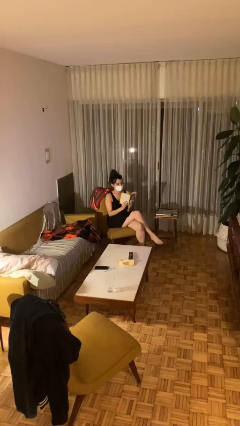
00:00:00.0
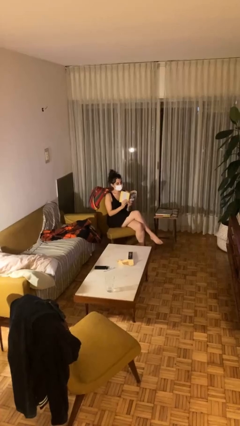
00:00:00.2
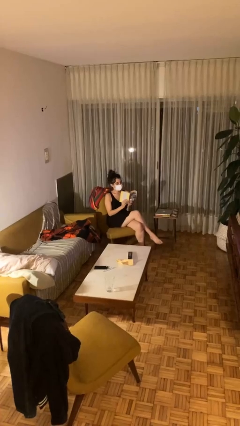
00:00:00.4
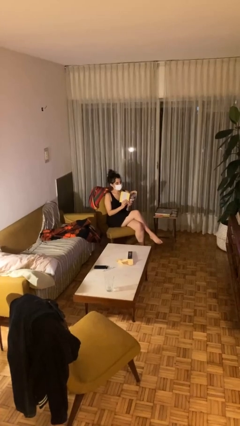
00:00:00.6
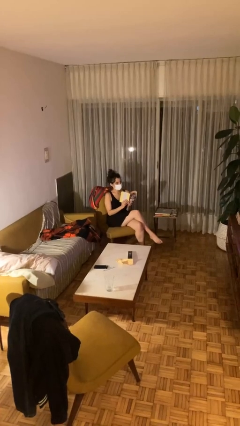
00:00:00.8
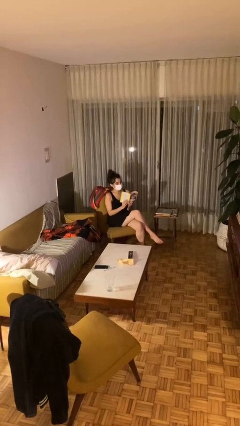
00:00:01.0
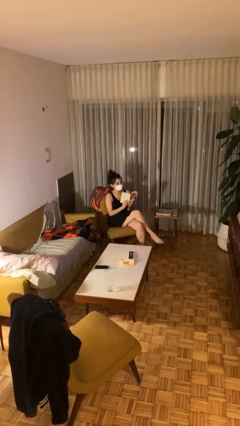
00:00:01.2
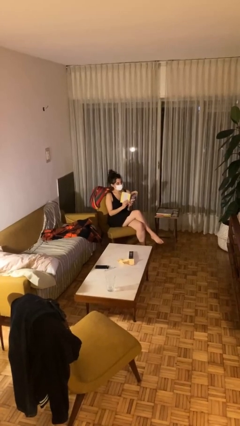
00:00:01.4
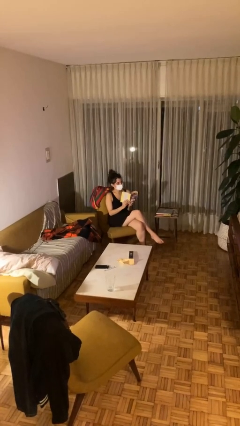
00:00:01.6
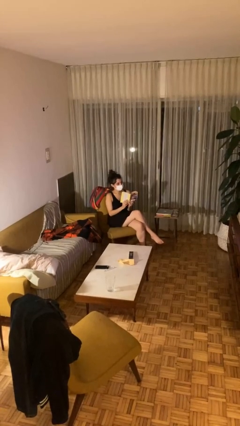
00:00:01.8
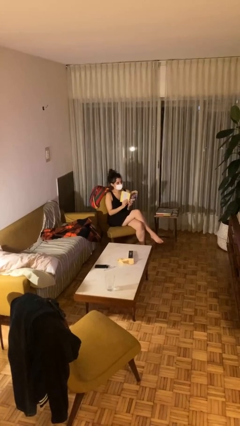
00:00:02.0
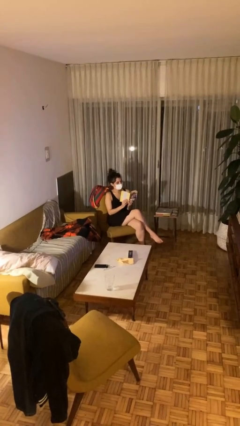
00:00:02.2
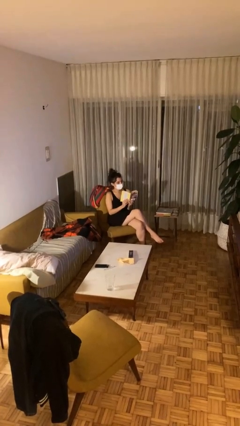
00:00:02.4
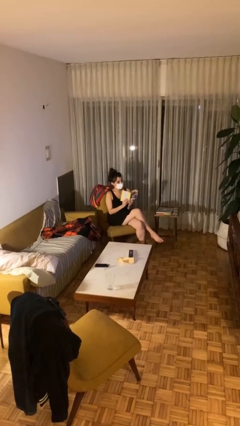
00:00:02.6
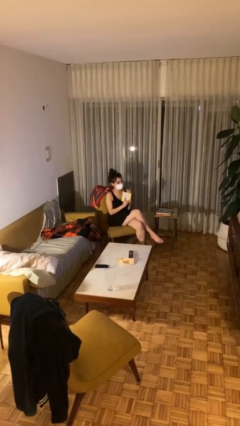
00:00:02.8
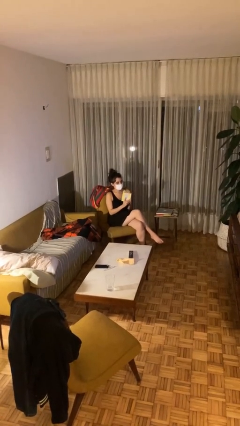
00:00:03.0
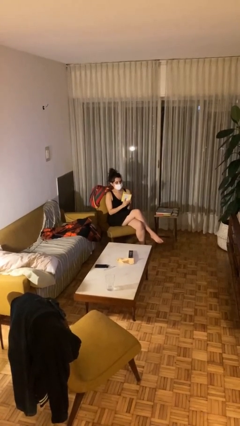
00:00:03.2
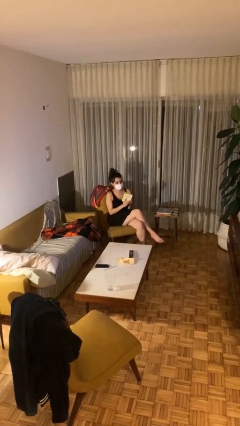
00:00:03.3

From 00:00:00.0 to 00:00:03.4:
person reads document

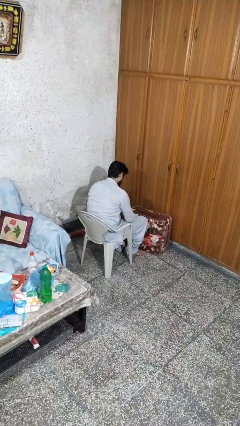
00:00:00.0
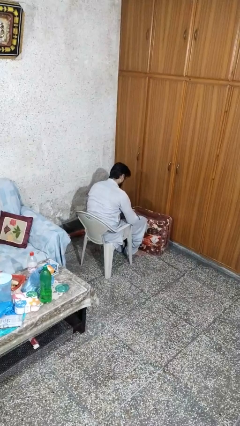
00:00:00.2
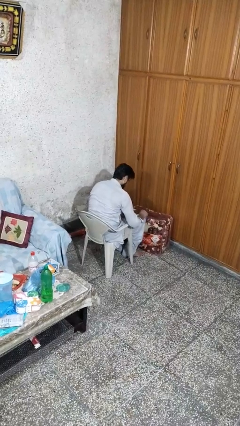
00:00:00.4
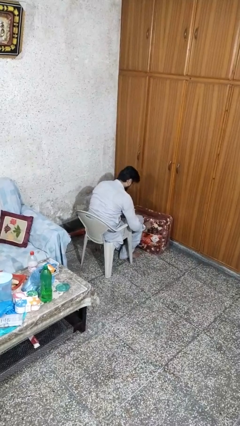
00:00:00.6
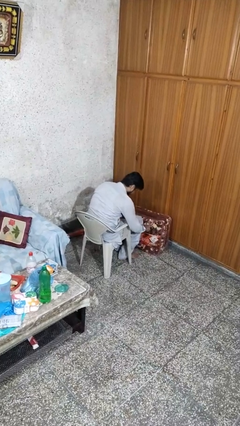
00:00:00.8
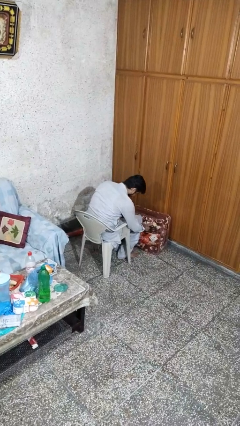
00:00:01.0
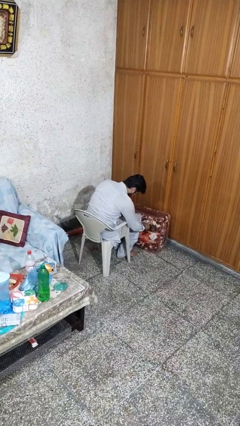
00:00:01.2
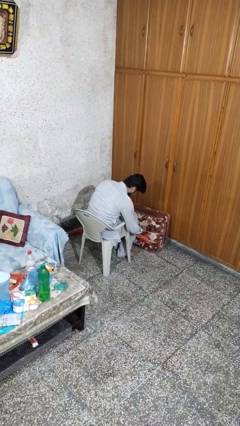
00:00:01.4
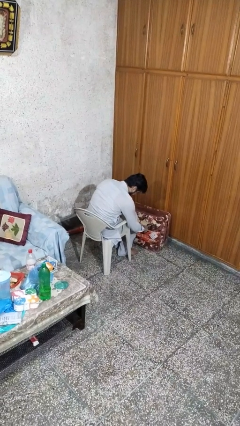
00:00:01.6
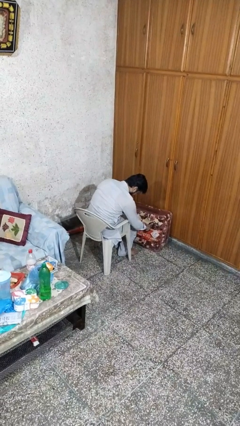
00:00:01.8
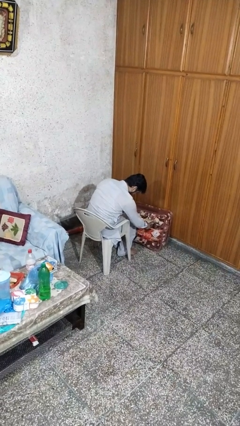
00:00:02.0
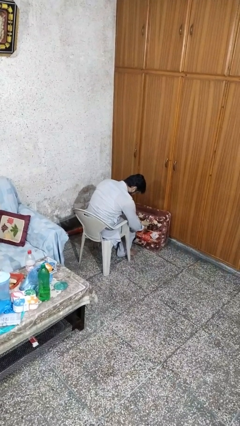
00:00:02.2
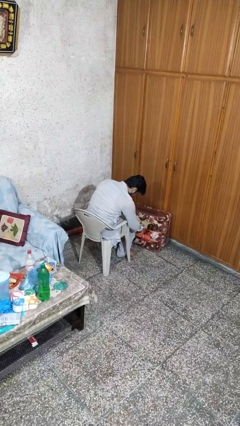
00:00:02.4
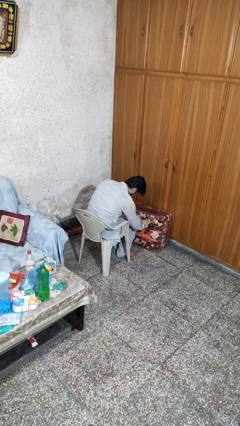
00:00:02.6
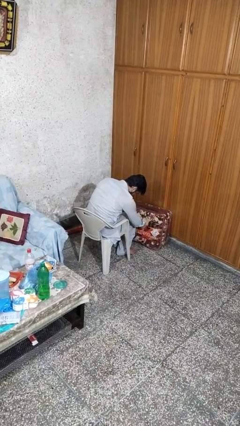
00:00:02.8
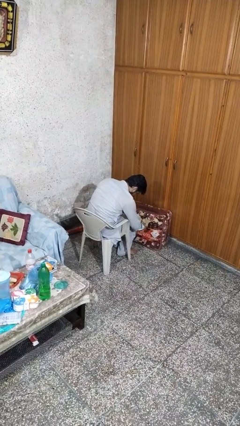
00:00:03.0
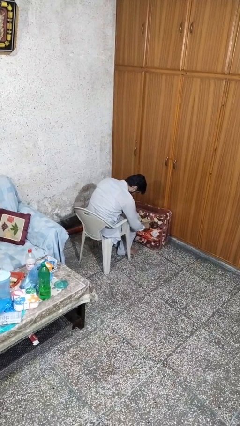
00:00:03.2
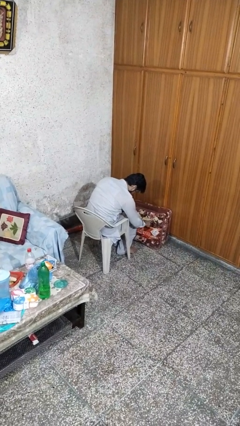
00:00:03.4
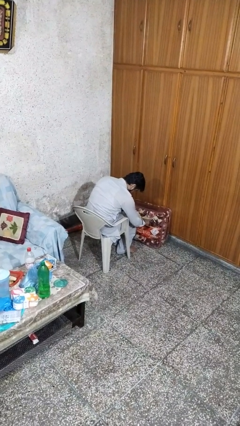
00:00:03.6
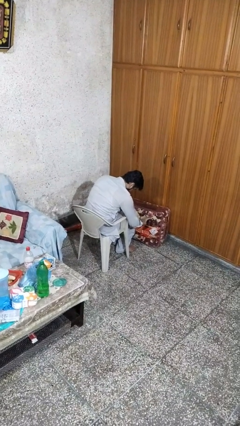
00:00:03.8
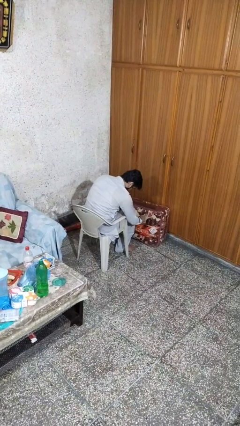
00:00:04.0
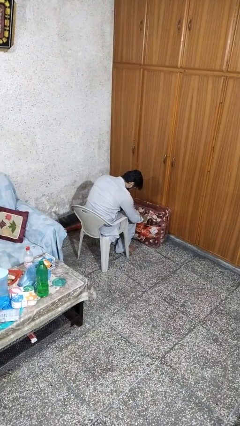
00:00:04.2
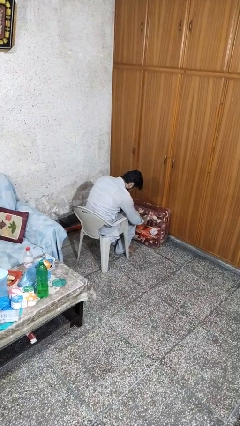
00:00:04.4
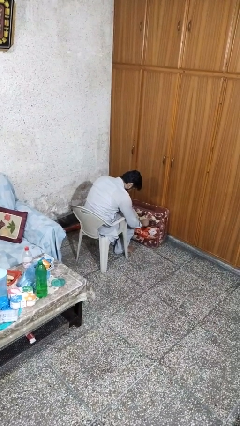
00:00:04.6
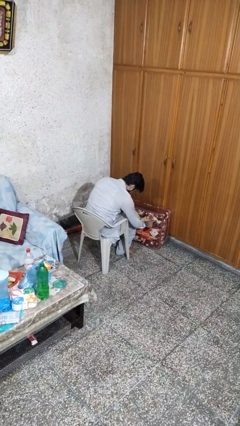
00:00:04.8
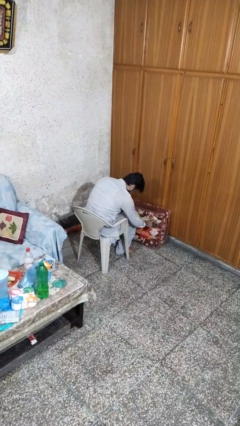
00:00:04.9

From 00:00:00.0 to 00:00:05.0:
person taps object with finger

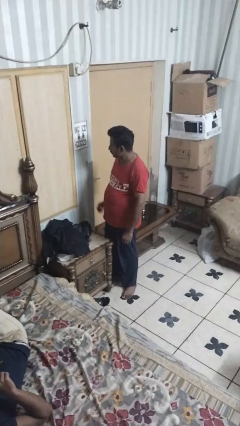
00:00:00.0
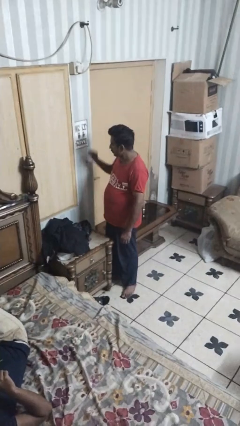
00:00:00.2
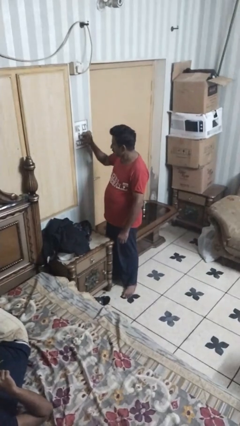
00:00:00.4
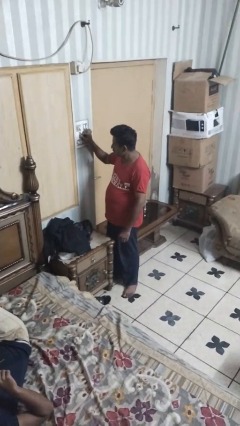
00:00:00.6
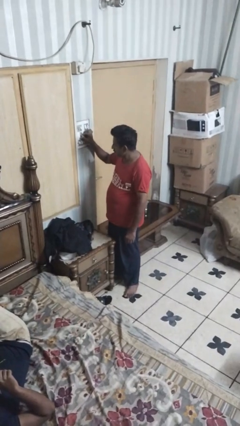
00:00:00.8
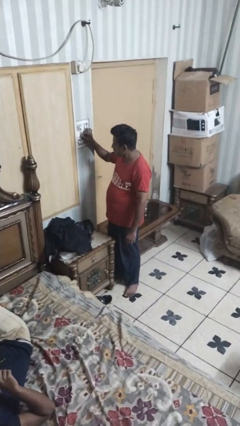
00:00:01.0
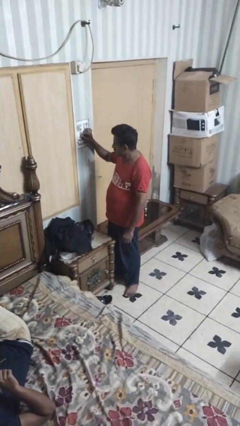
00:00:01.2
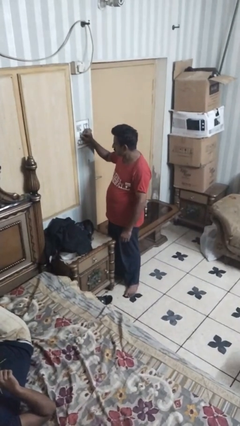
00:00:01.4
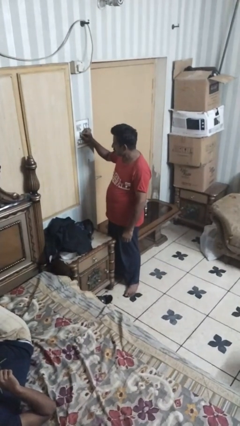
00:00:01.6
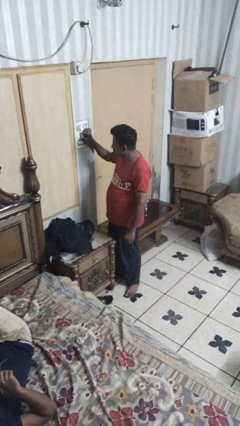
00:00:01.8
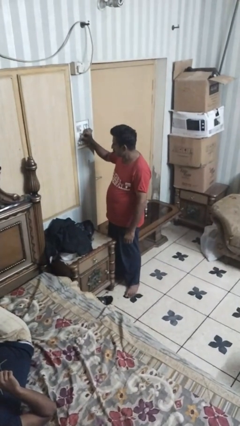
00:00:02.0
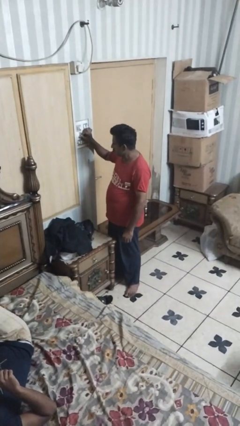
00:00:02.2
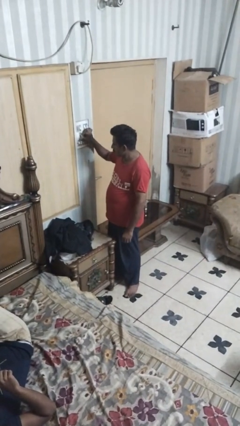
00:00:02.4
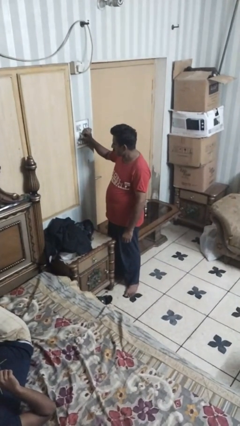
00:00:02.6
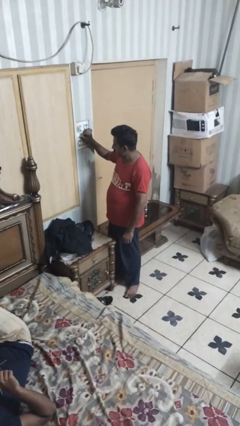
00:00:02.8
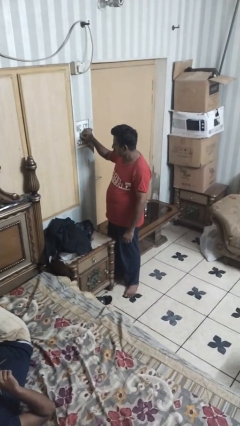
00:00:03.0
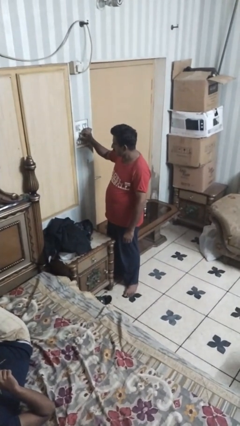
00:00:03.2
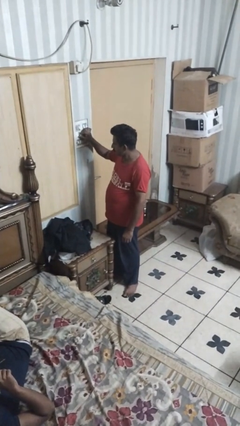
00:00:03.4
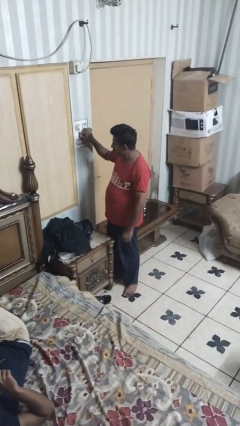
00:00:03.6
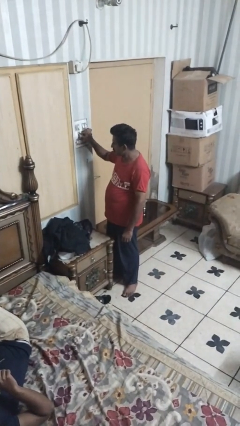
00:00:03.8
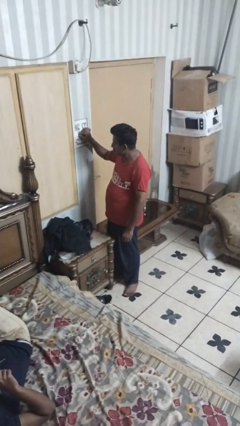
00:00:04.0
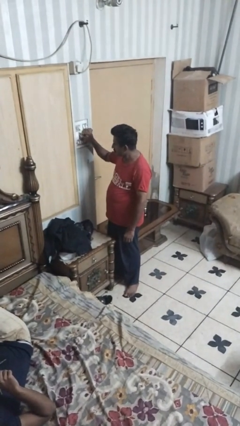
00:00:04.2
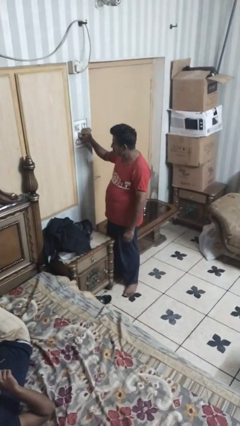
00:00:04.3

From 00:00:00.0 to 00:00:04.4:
person adjusts thermostat

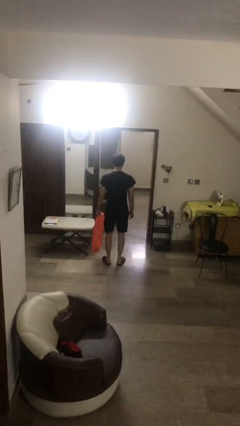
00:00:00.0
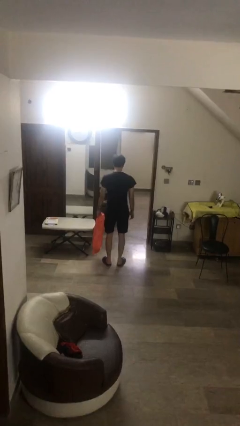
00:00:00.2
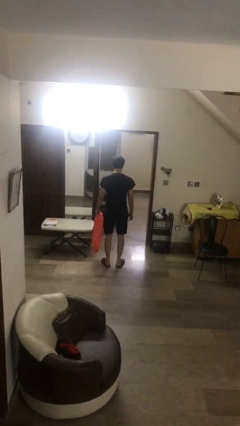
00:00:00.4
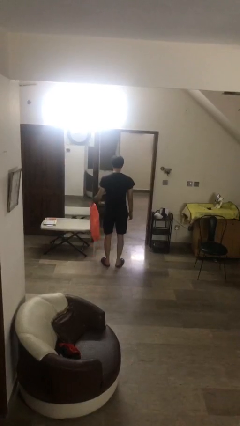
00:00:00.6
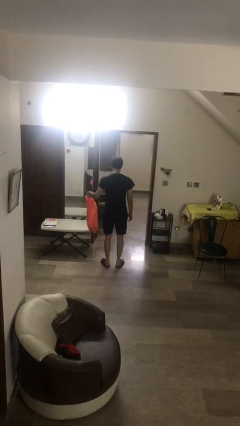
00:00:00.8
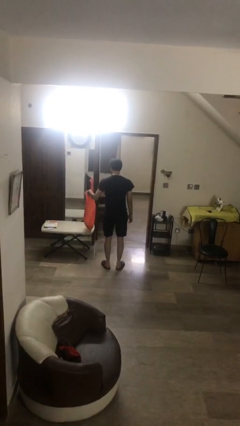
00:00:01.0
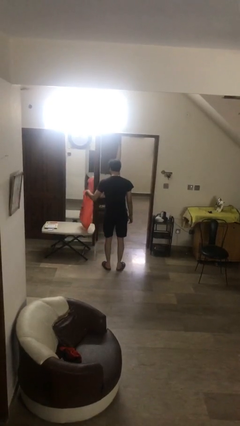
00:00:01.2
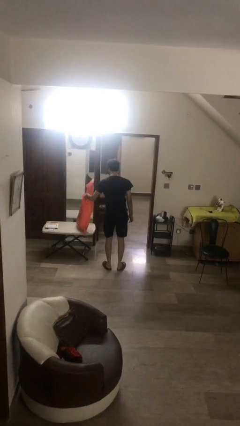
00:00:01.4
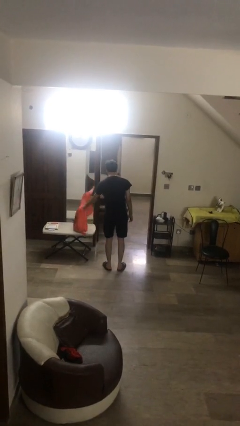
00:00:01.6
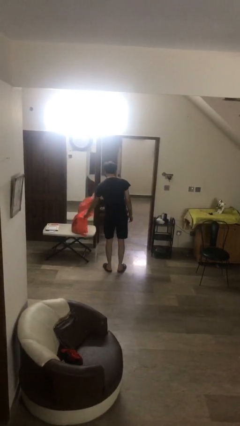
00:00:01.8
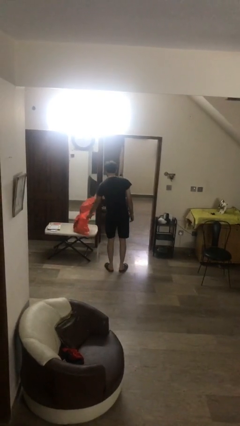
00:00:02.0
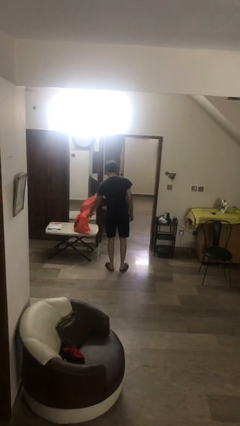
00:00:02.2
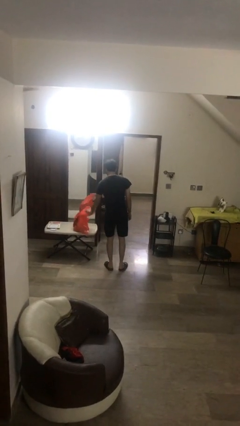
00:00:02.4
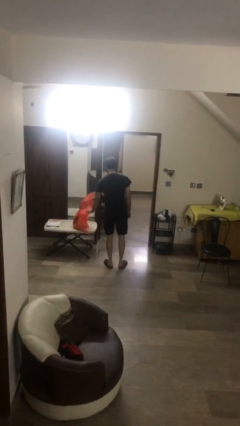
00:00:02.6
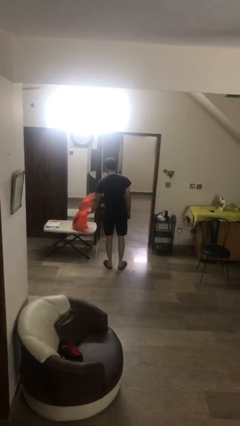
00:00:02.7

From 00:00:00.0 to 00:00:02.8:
person puts down object on table

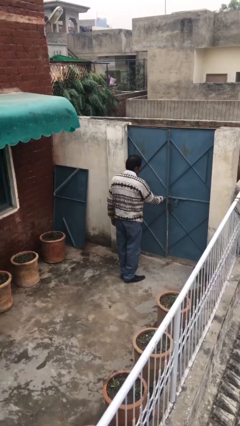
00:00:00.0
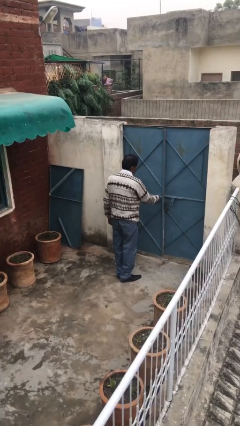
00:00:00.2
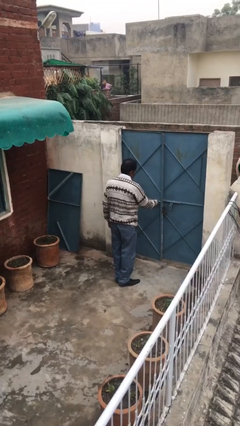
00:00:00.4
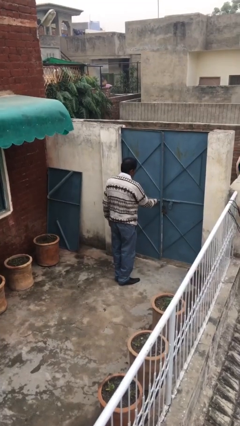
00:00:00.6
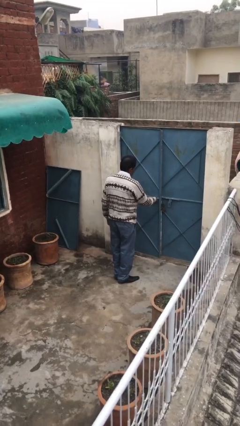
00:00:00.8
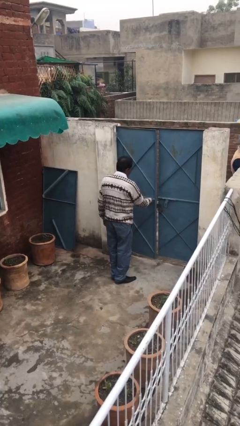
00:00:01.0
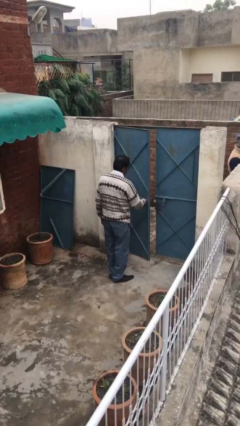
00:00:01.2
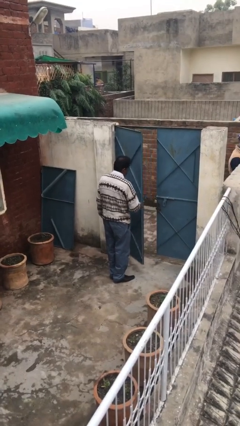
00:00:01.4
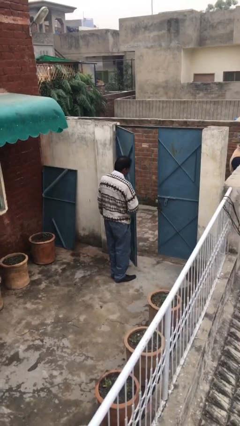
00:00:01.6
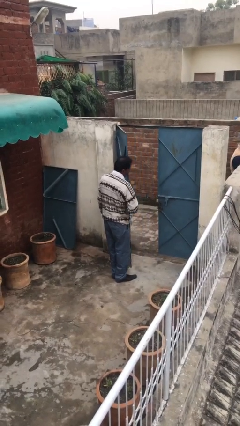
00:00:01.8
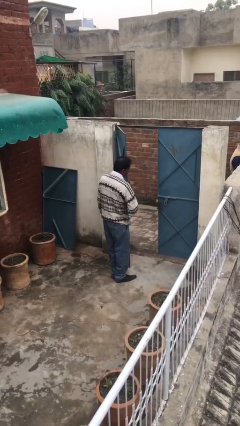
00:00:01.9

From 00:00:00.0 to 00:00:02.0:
person opens facility door
